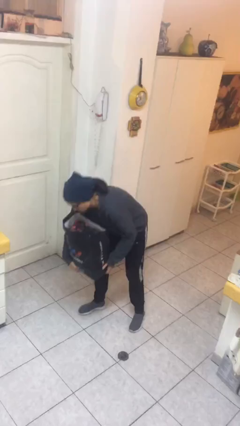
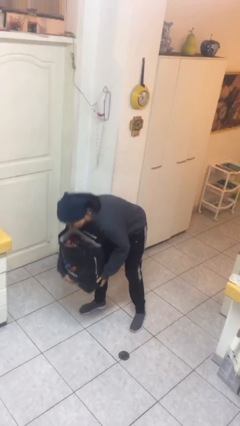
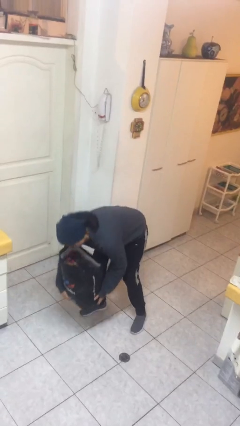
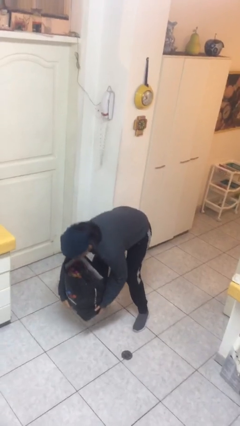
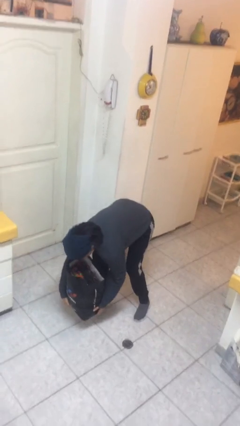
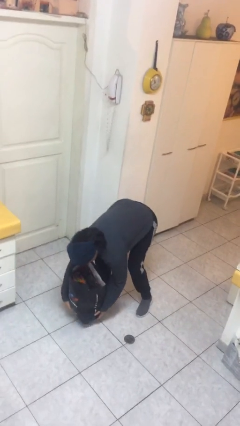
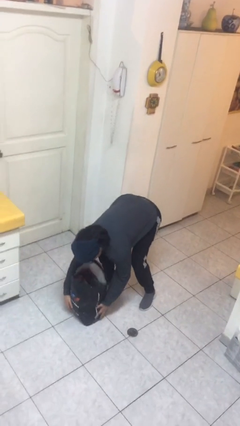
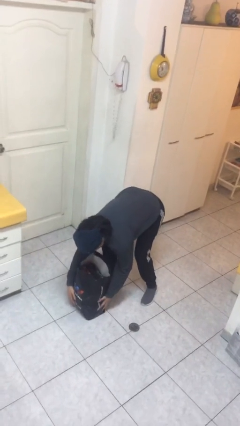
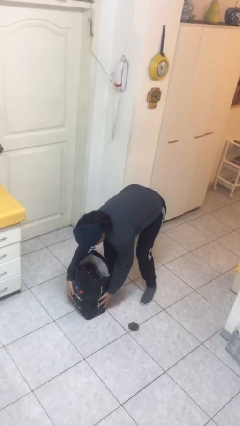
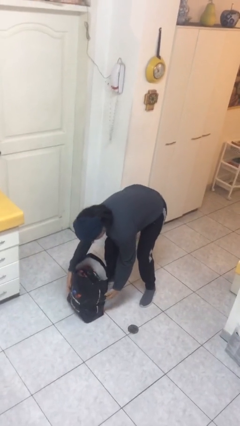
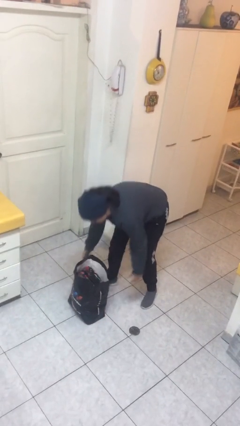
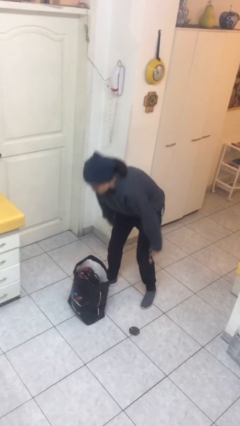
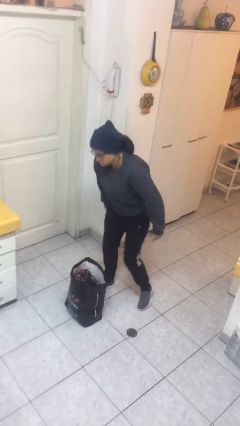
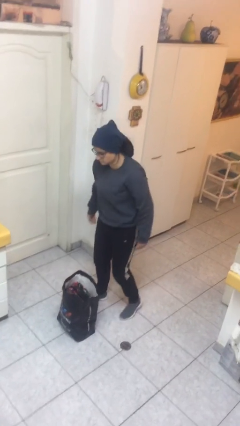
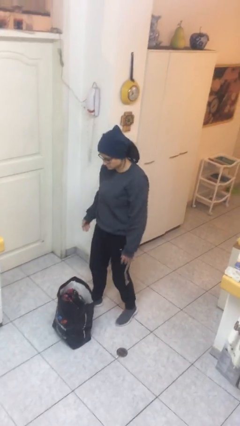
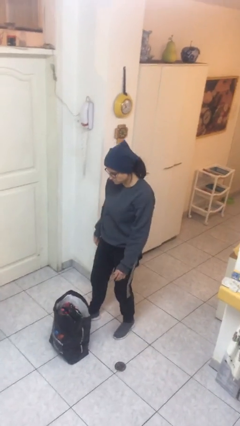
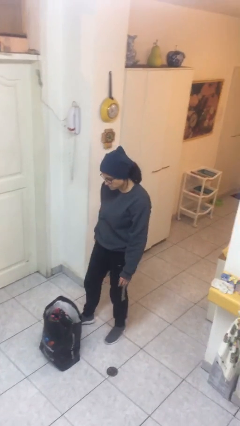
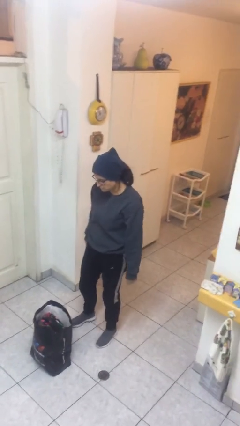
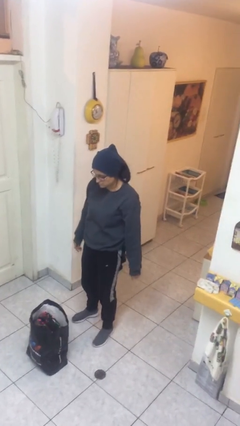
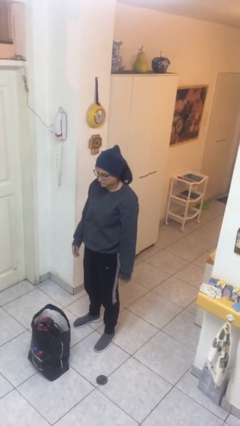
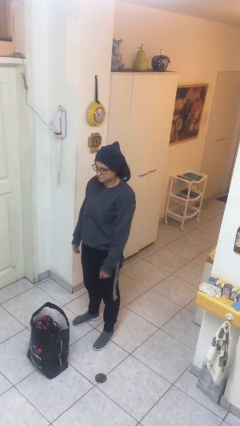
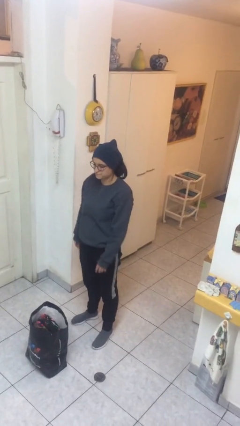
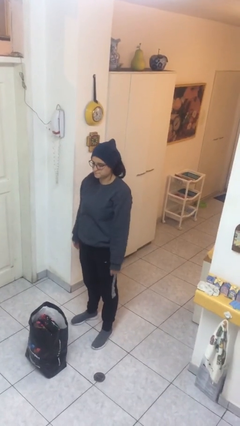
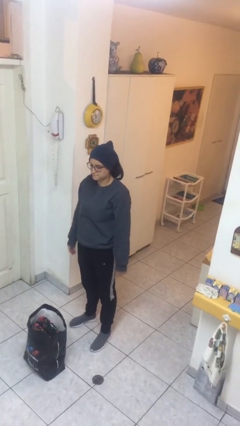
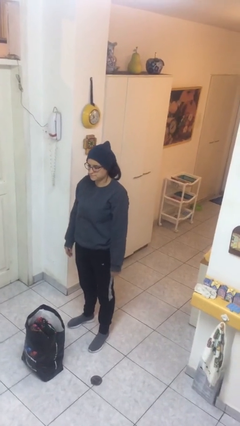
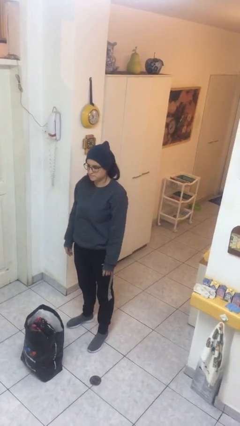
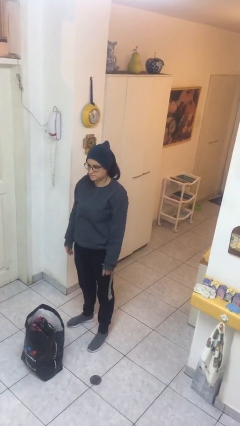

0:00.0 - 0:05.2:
person puts down object on floor

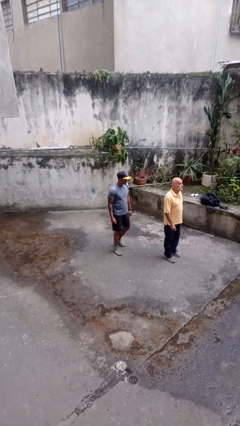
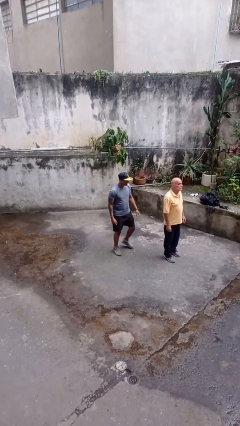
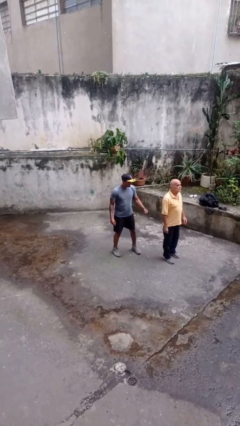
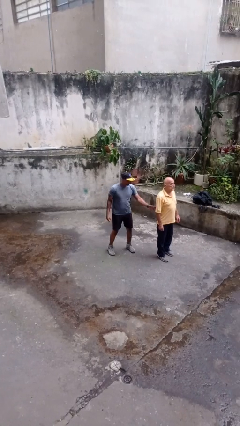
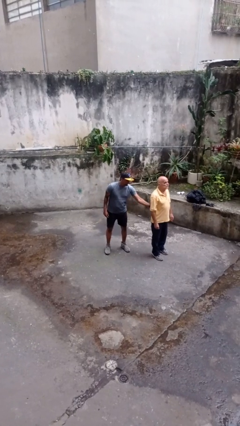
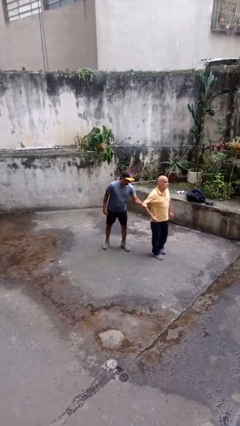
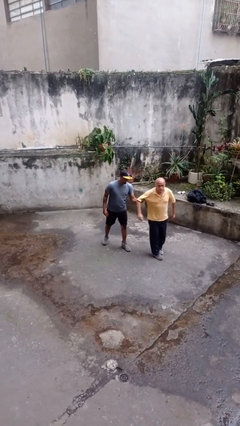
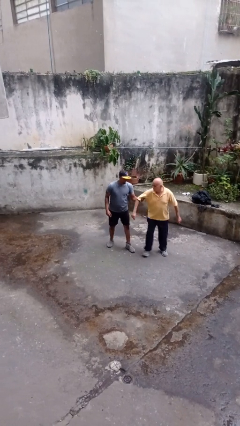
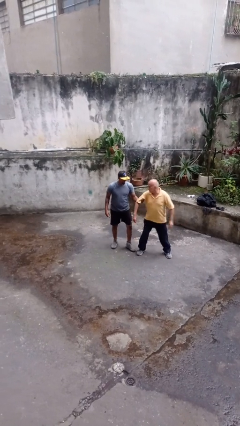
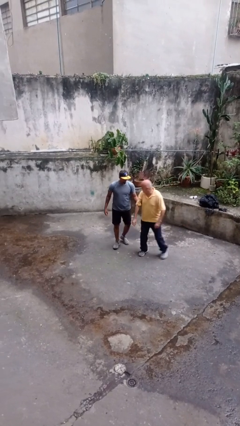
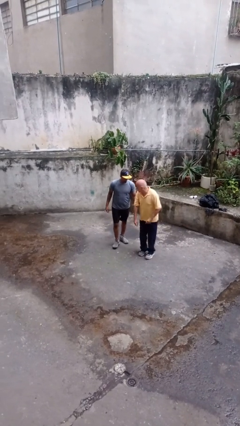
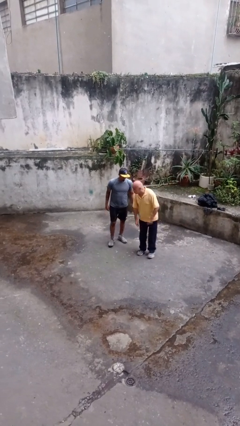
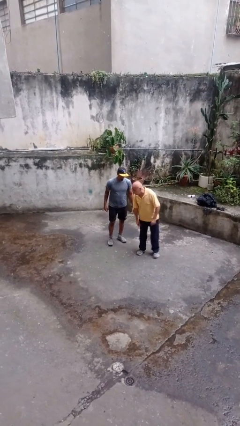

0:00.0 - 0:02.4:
person grabs person by bicep

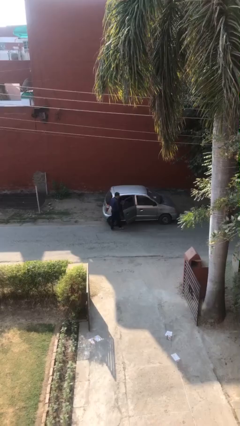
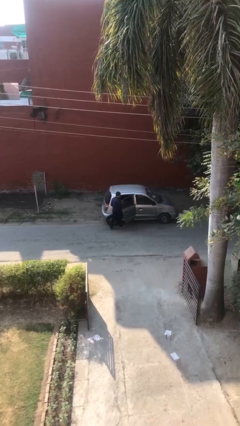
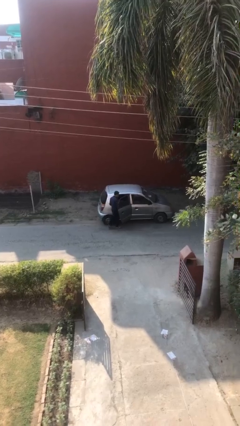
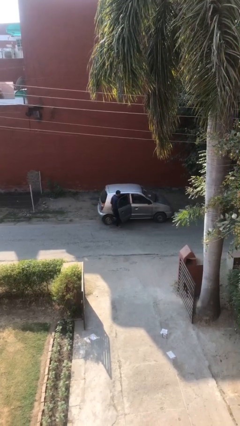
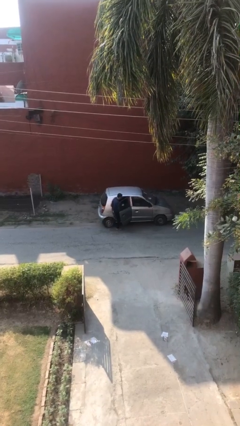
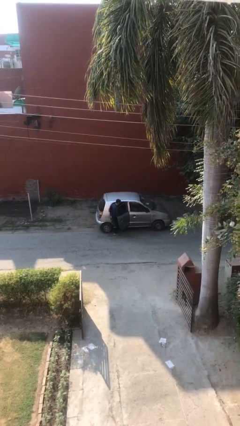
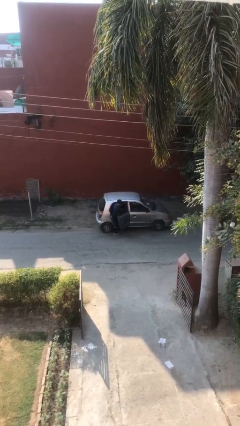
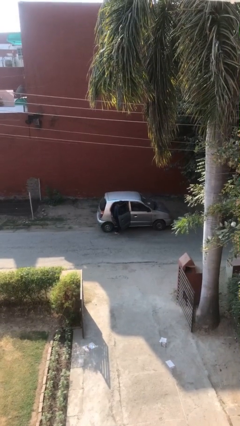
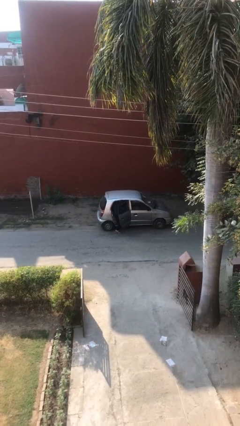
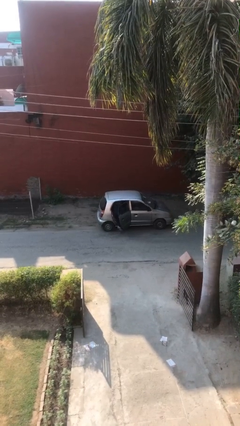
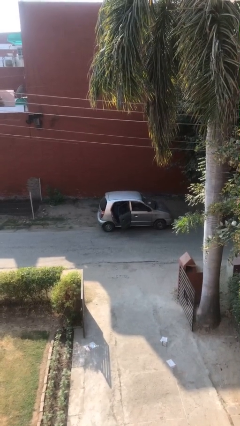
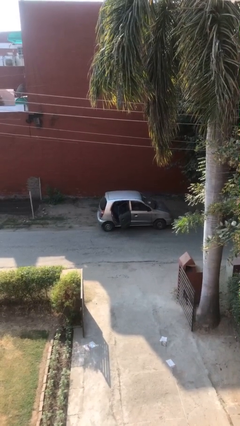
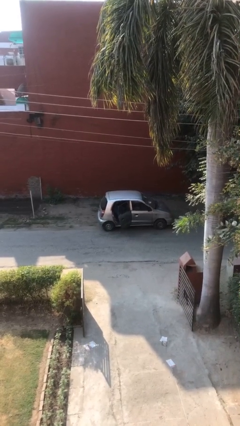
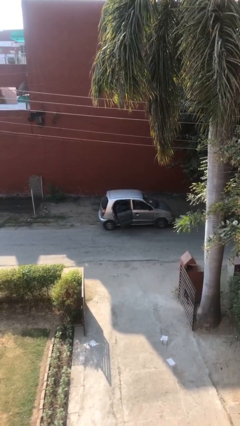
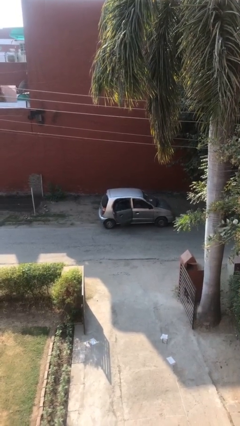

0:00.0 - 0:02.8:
person enters car

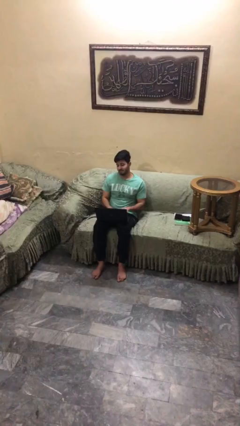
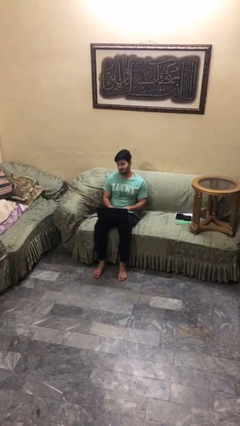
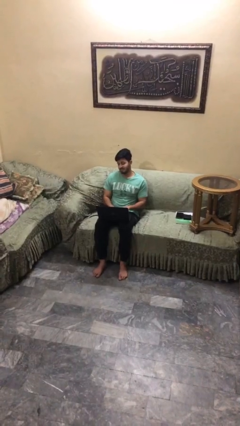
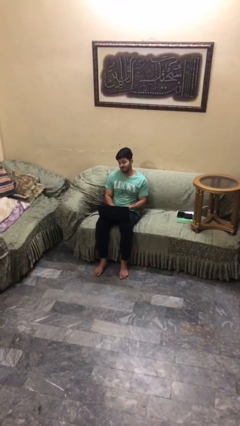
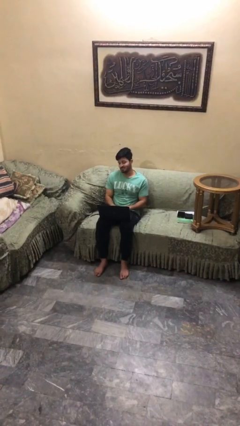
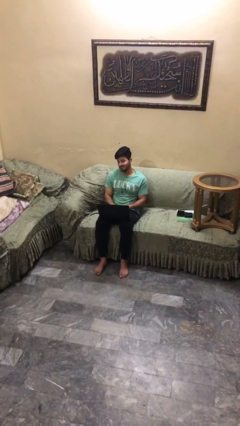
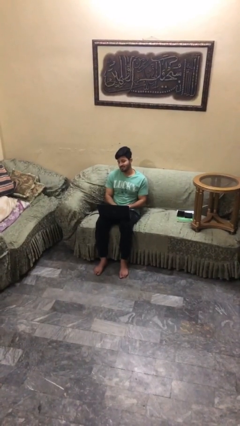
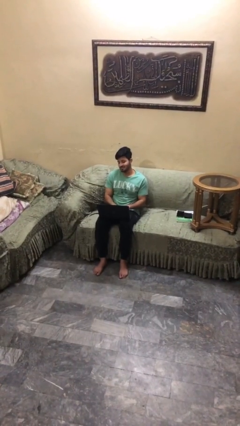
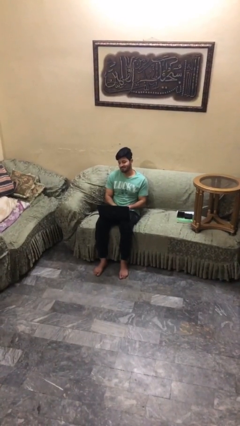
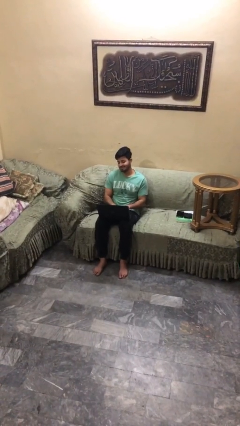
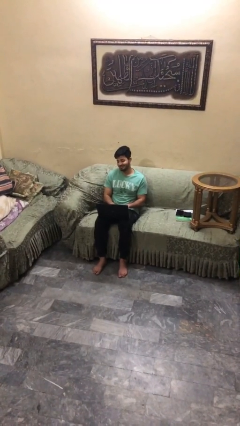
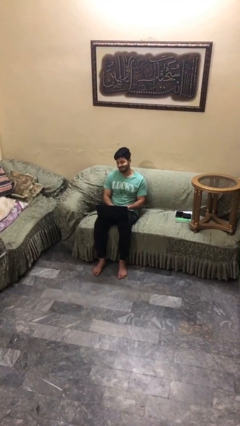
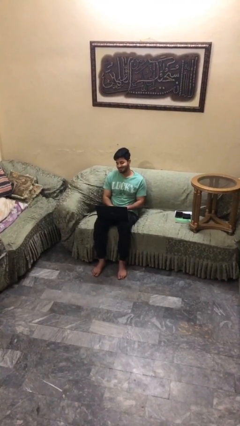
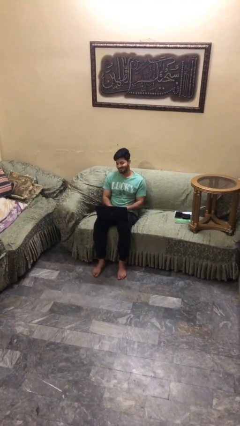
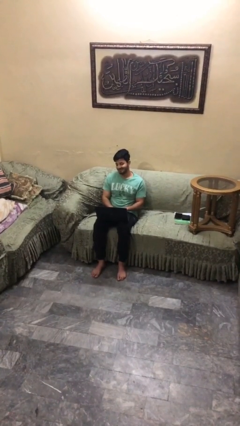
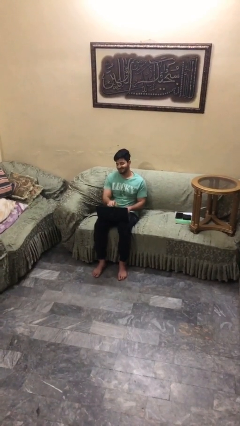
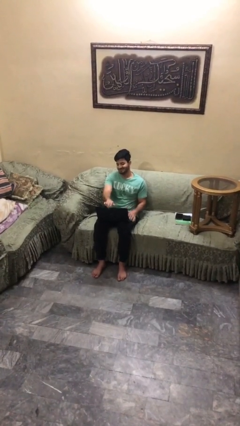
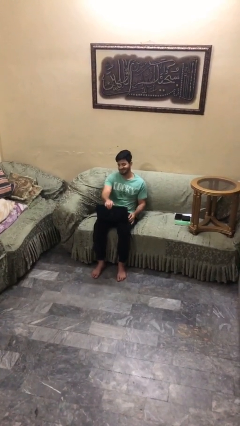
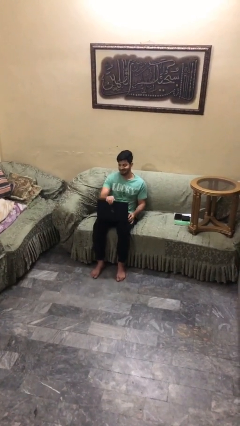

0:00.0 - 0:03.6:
person interacts with laptop

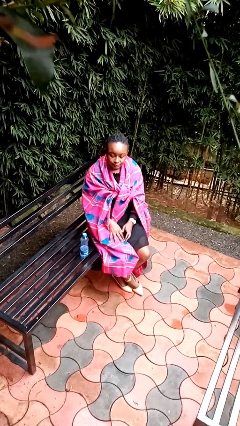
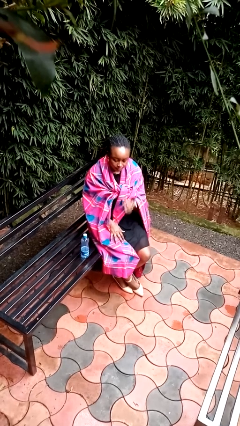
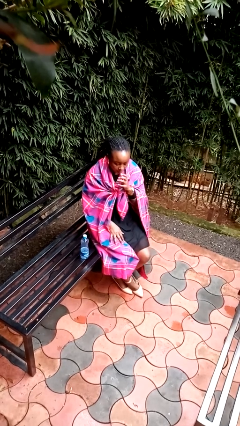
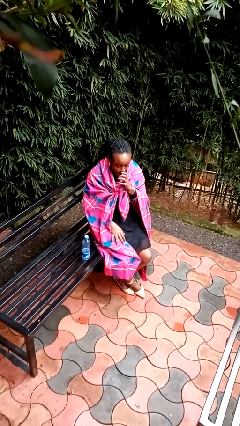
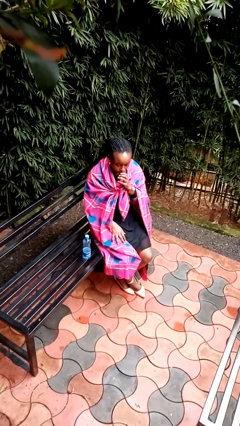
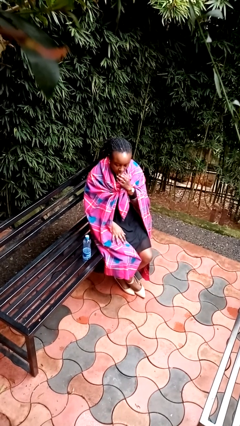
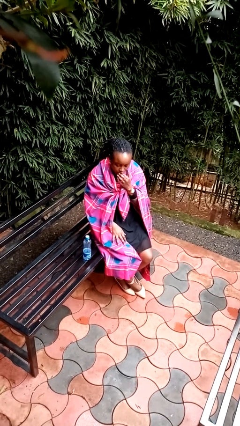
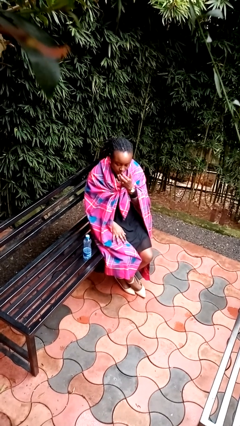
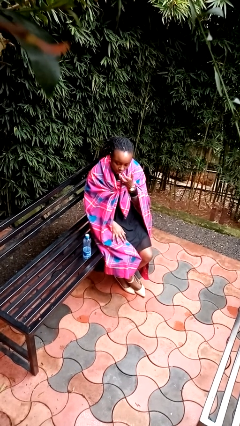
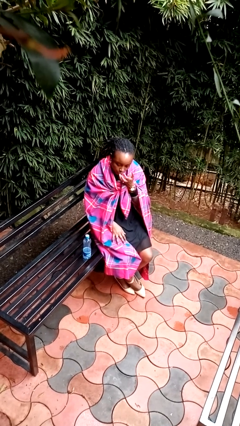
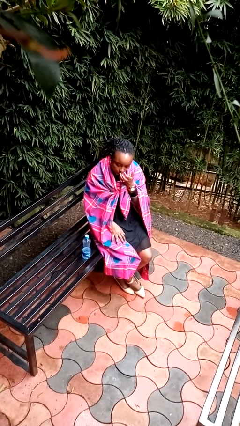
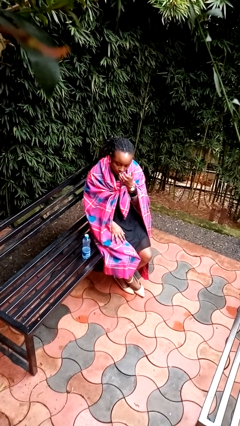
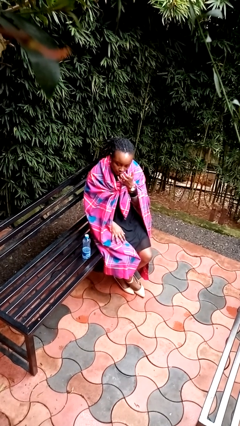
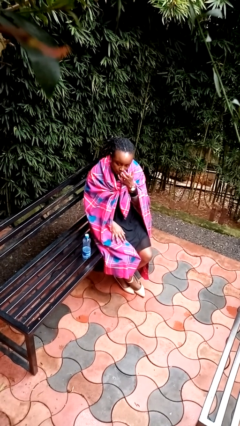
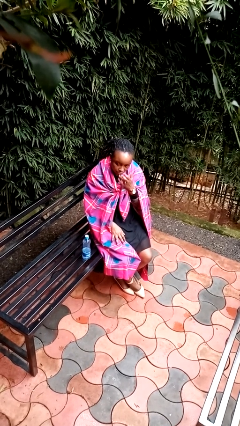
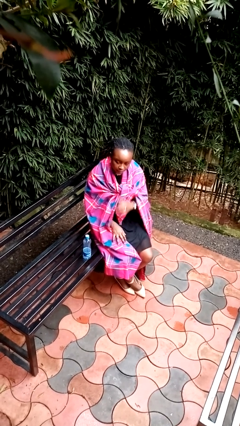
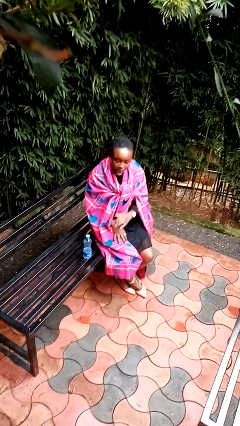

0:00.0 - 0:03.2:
person licks fingers

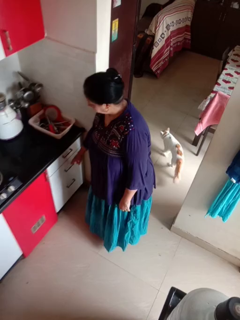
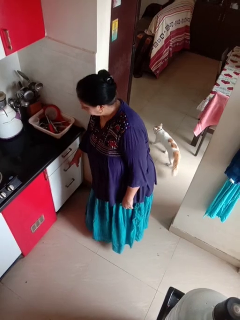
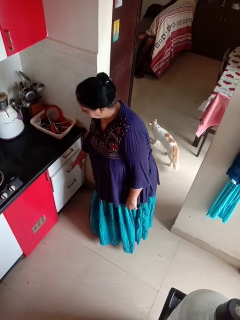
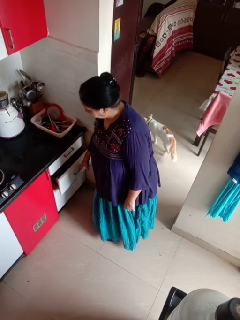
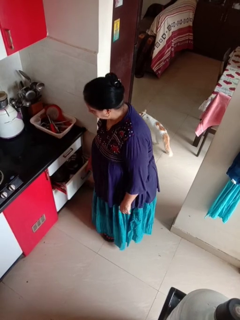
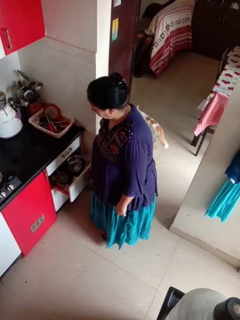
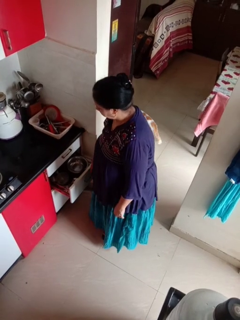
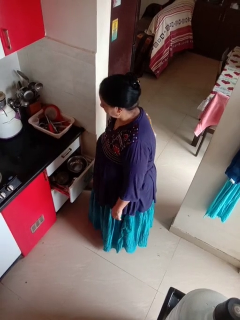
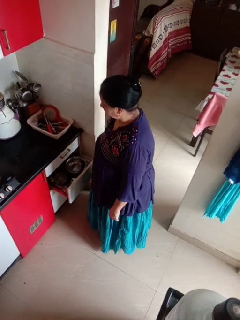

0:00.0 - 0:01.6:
person opens kitchen drawer
